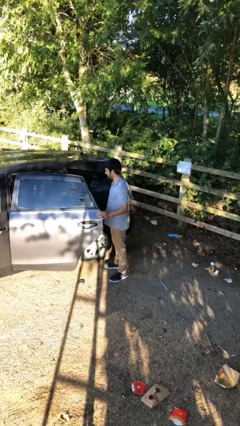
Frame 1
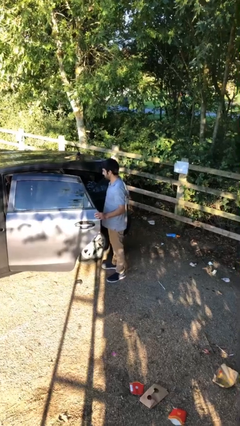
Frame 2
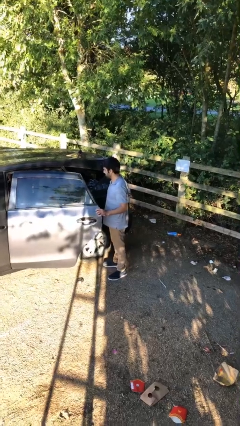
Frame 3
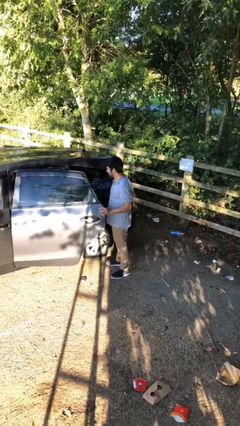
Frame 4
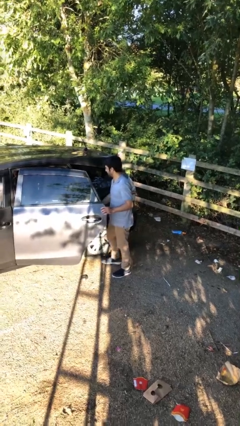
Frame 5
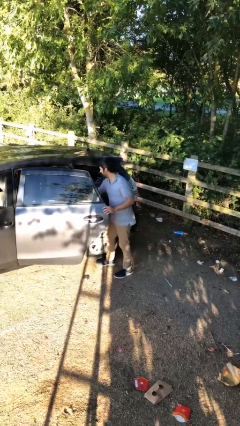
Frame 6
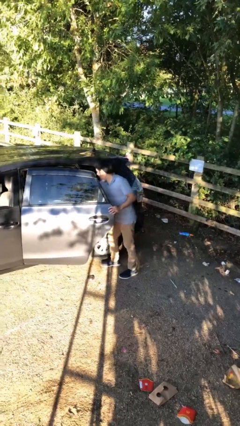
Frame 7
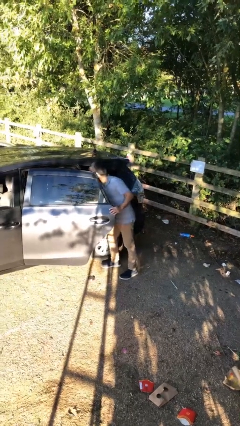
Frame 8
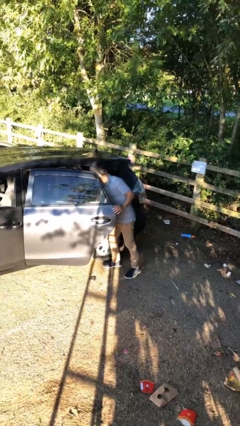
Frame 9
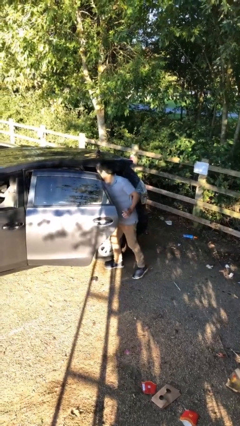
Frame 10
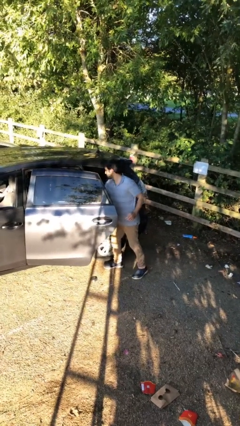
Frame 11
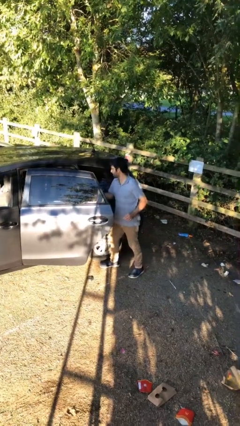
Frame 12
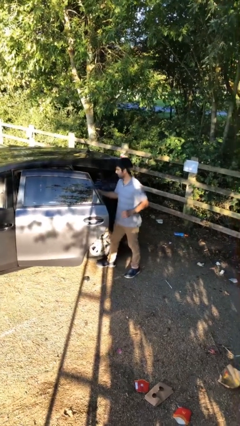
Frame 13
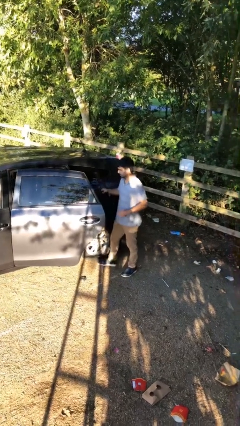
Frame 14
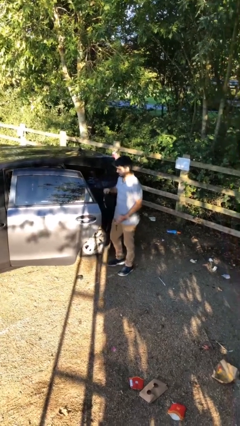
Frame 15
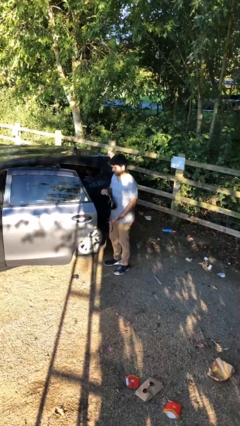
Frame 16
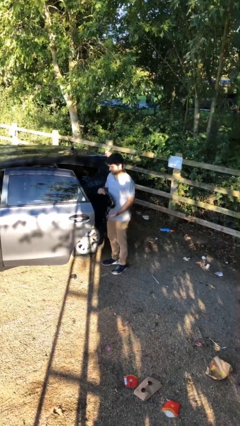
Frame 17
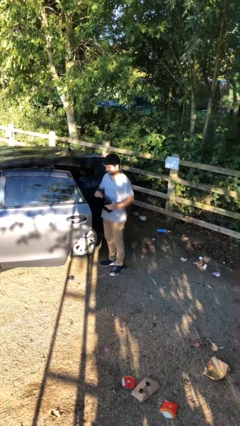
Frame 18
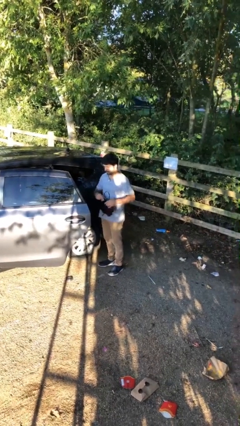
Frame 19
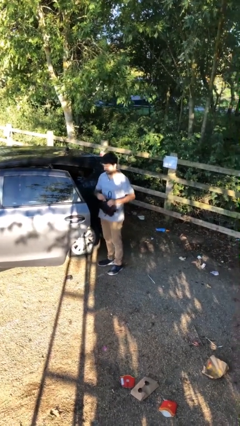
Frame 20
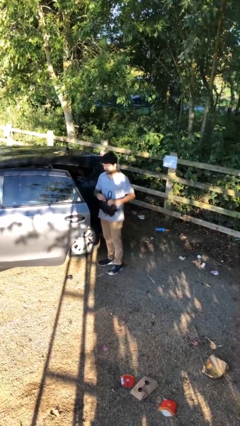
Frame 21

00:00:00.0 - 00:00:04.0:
person unloads car

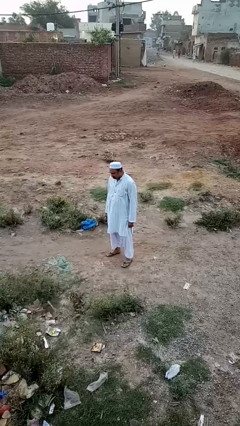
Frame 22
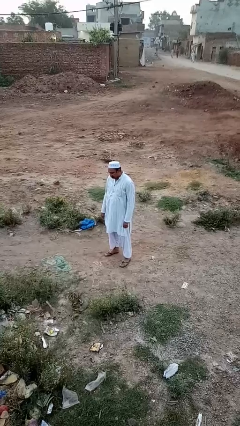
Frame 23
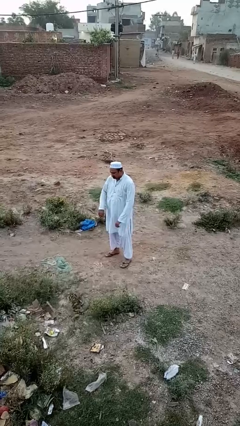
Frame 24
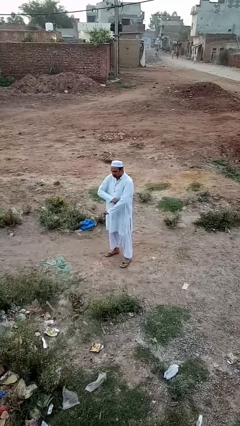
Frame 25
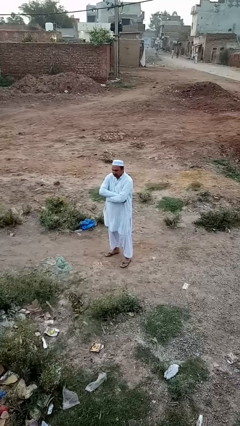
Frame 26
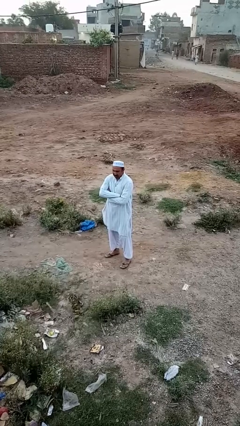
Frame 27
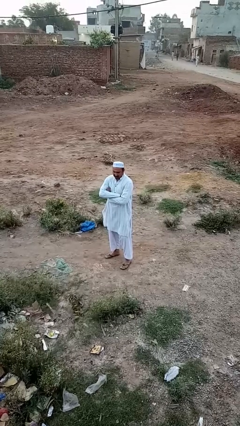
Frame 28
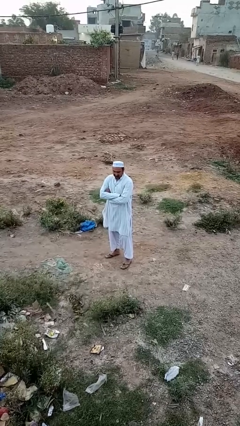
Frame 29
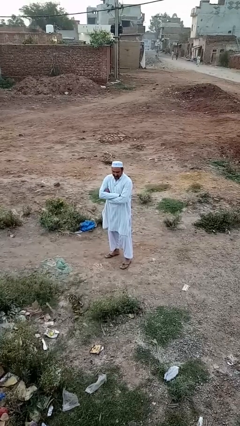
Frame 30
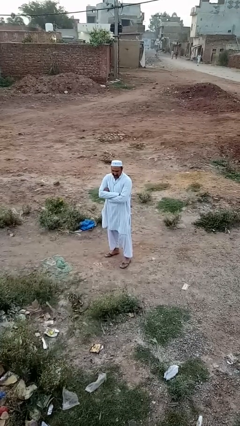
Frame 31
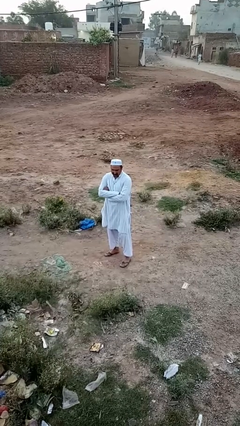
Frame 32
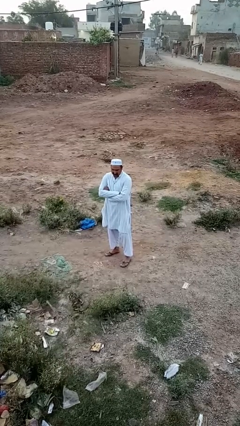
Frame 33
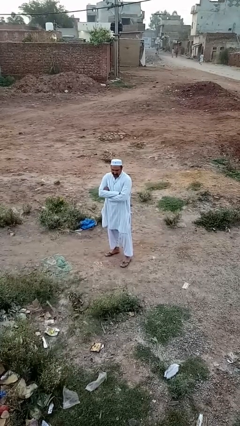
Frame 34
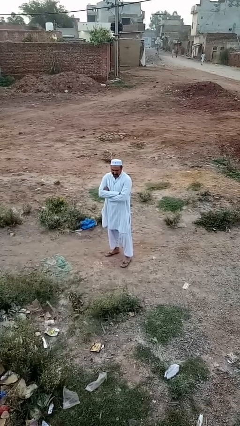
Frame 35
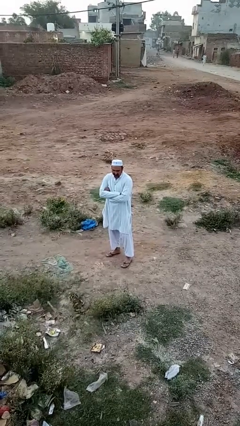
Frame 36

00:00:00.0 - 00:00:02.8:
person crosses arms

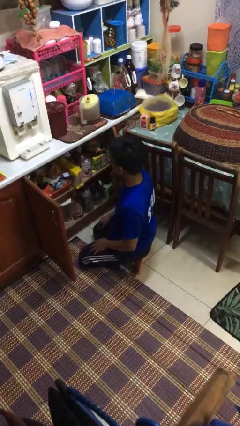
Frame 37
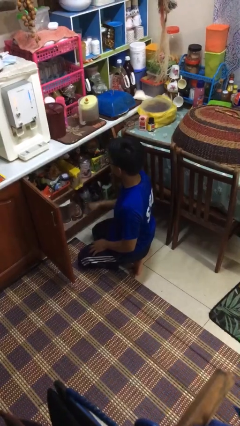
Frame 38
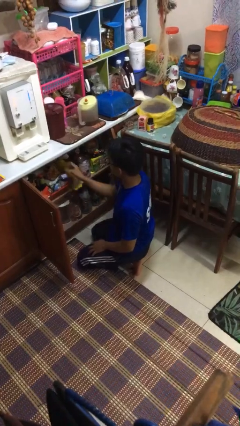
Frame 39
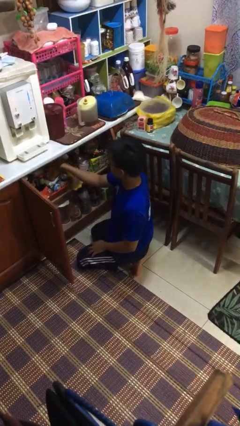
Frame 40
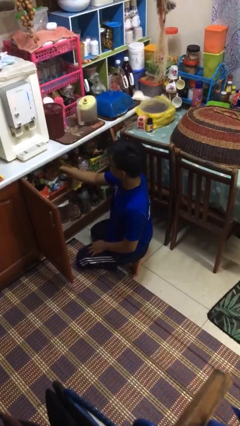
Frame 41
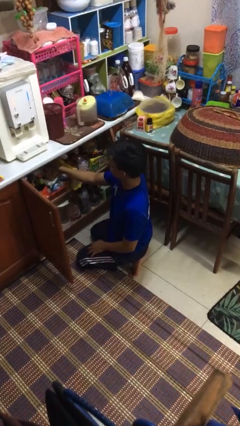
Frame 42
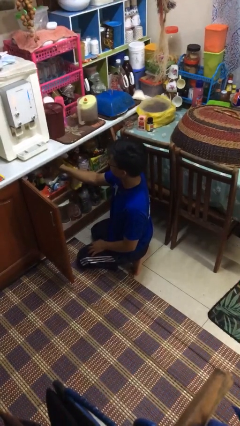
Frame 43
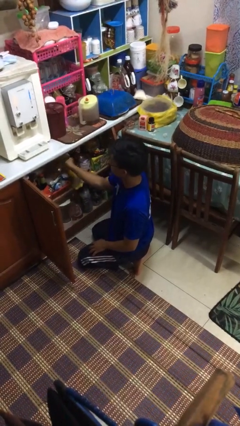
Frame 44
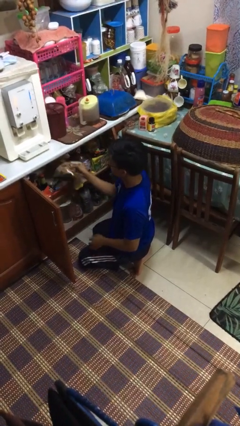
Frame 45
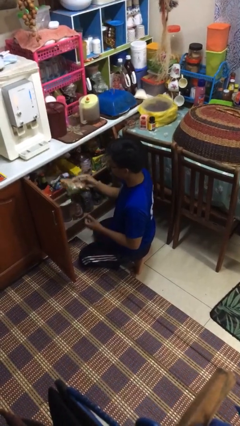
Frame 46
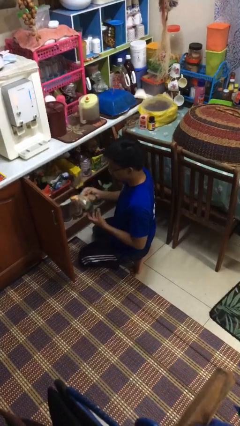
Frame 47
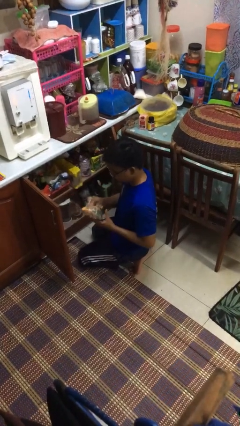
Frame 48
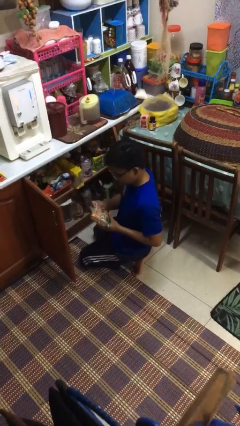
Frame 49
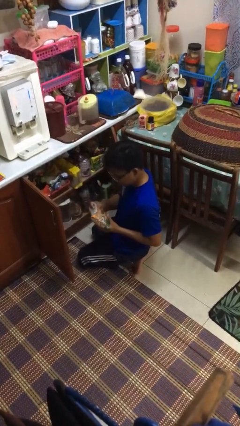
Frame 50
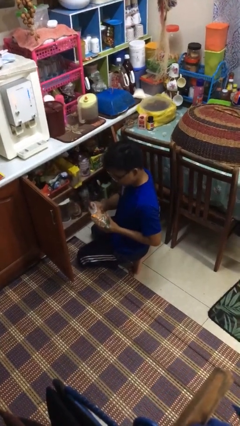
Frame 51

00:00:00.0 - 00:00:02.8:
person takes object from cabinet

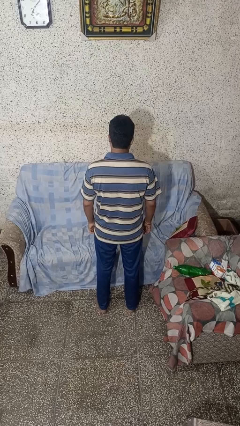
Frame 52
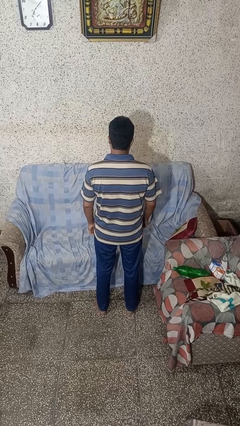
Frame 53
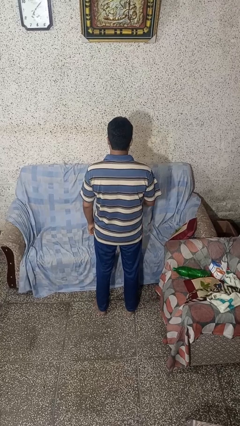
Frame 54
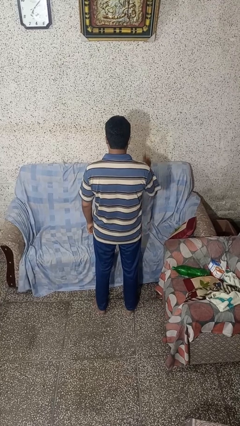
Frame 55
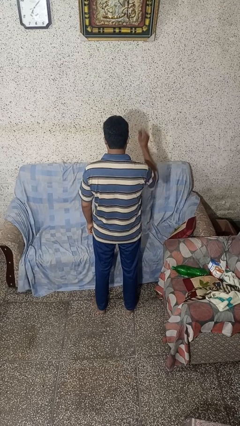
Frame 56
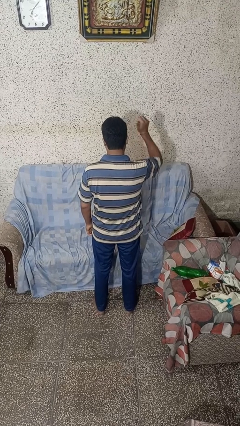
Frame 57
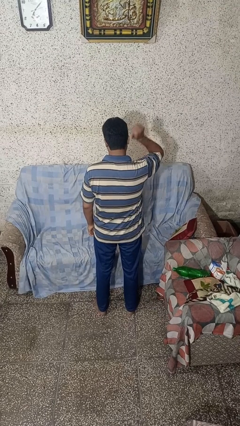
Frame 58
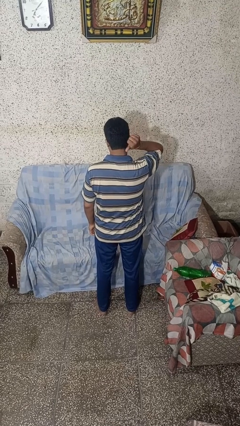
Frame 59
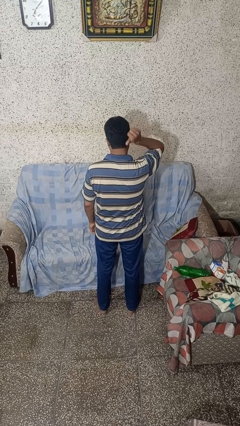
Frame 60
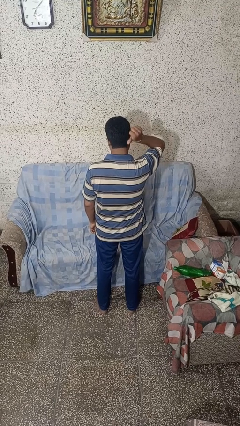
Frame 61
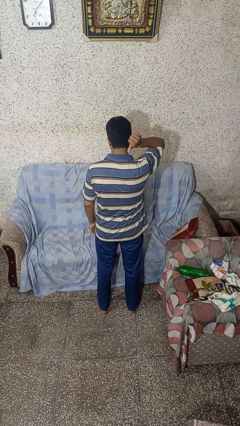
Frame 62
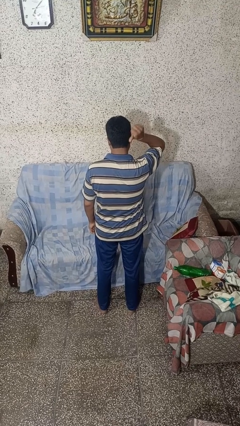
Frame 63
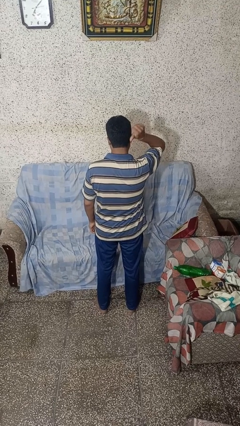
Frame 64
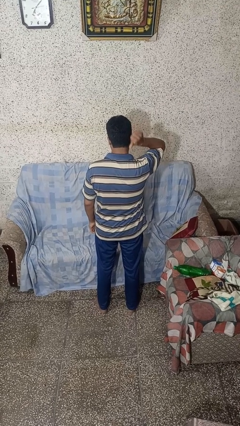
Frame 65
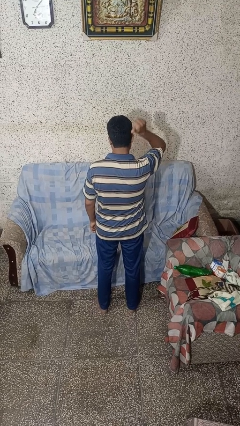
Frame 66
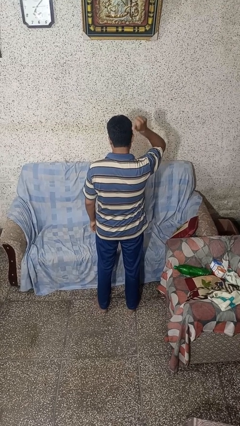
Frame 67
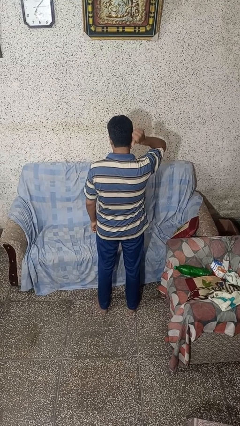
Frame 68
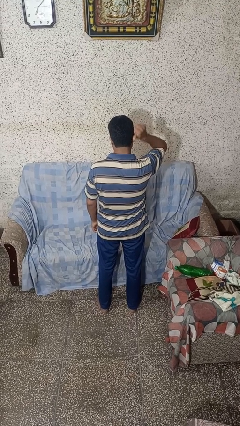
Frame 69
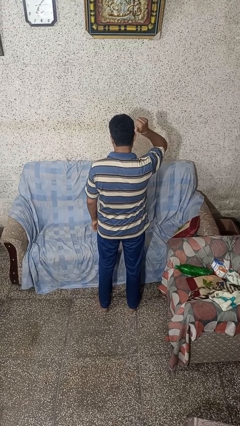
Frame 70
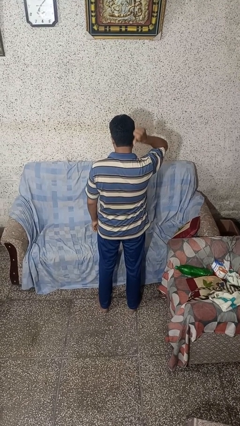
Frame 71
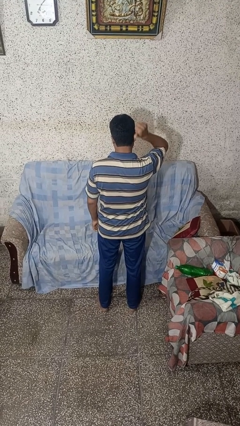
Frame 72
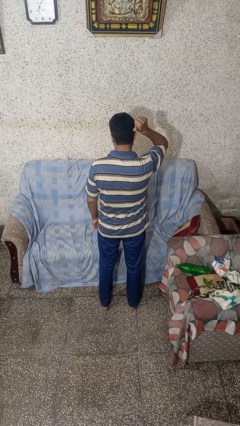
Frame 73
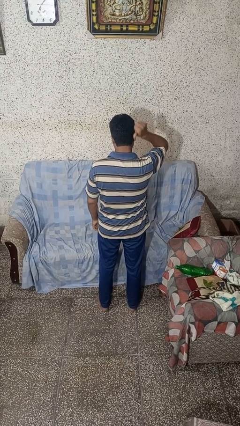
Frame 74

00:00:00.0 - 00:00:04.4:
person gestures behind me

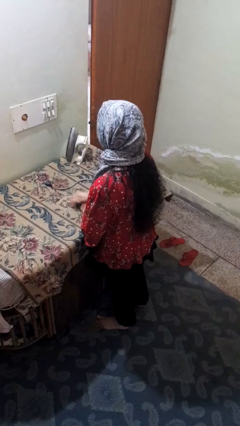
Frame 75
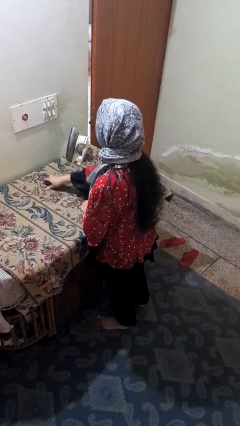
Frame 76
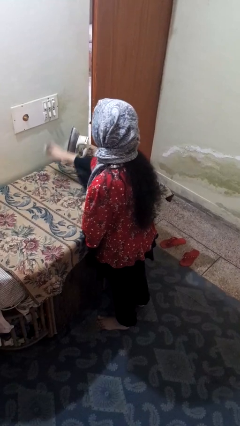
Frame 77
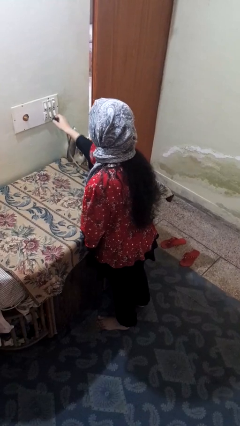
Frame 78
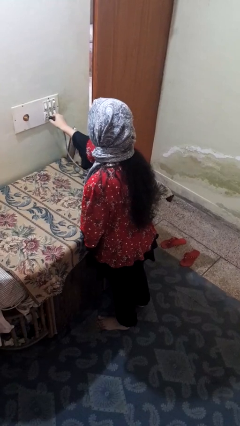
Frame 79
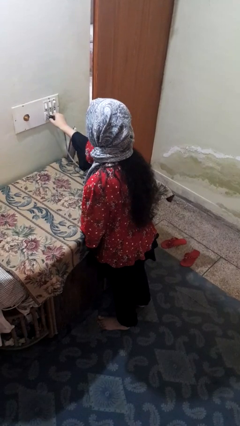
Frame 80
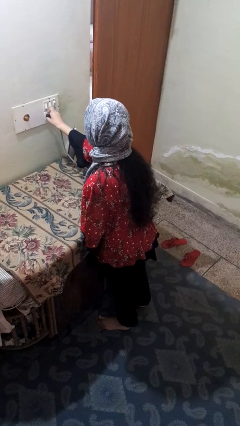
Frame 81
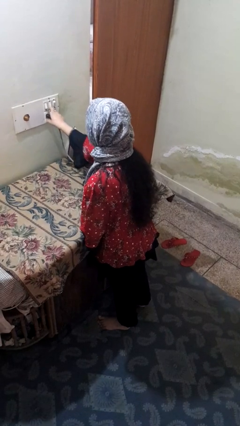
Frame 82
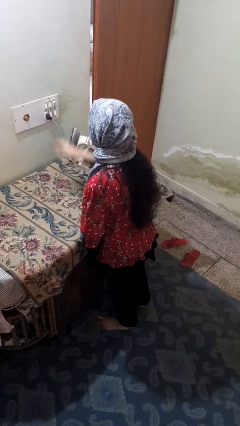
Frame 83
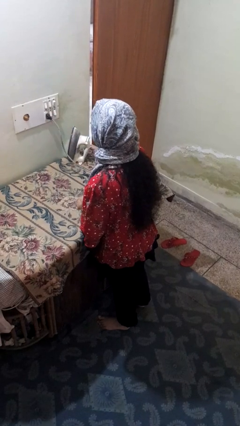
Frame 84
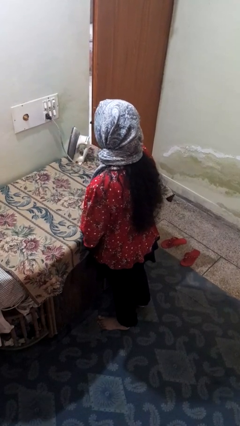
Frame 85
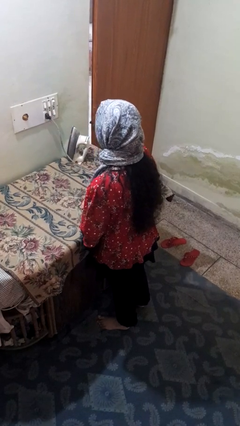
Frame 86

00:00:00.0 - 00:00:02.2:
person plugs into electrical socket

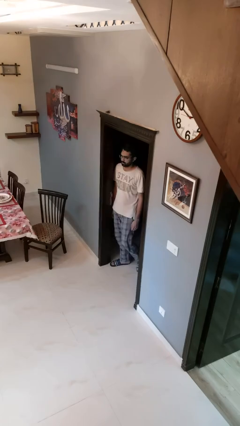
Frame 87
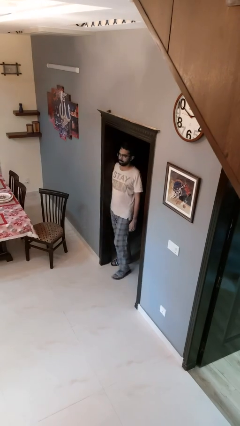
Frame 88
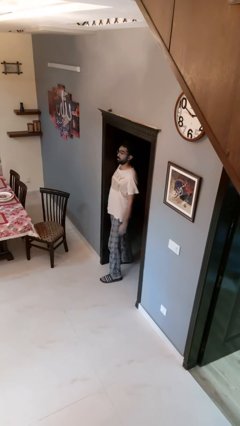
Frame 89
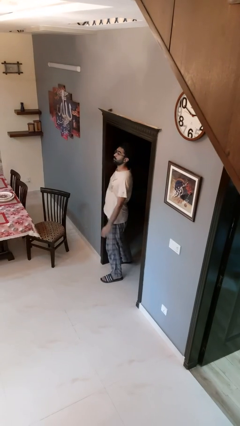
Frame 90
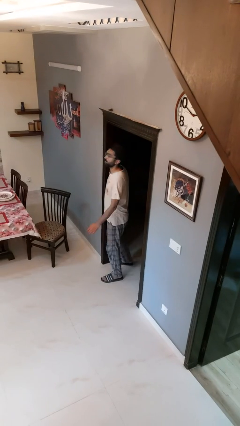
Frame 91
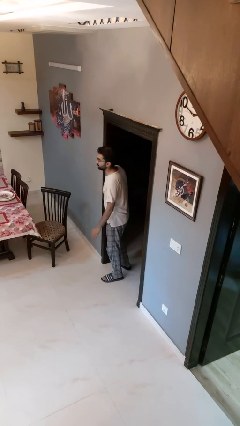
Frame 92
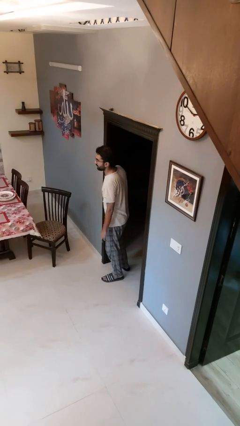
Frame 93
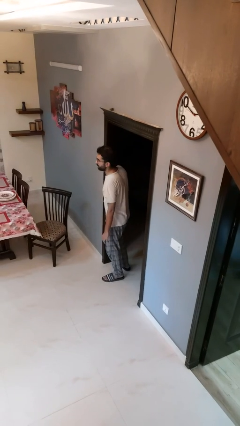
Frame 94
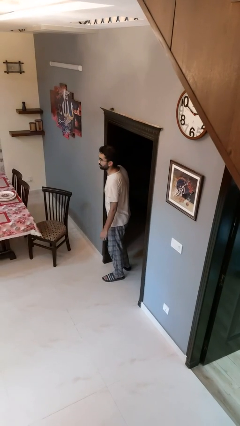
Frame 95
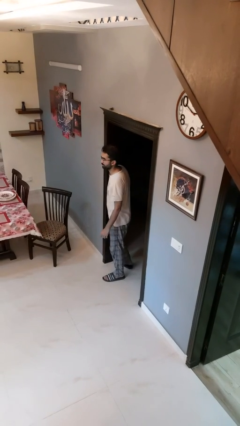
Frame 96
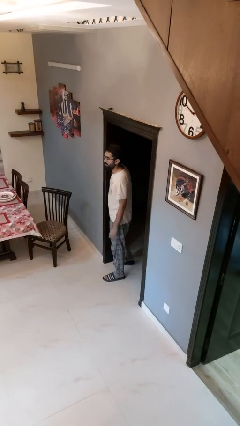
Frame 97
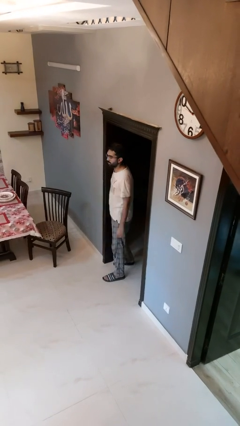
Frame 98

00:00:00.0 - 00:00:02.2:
person bumps into wall
